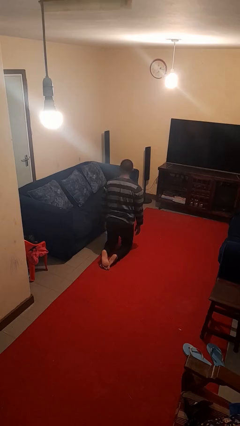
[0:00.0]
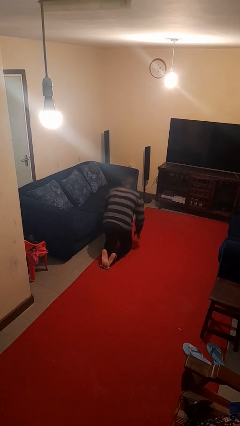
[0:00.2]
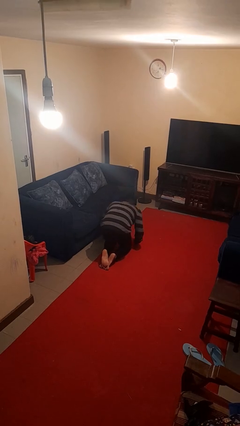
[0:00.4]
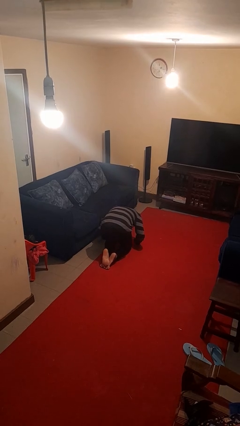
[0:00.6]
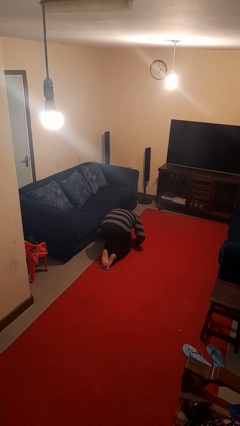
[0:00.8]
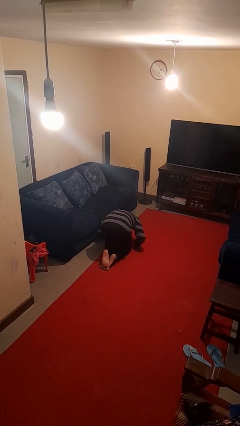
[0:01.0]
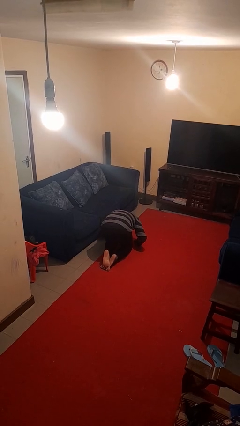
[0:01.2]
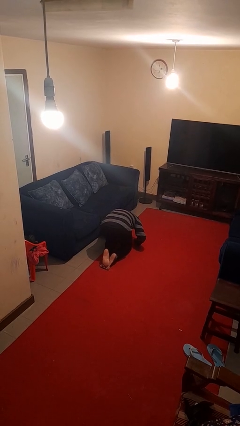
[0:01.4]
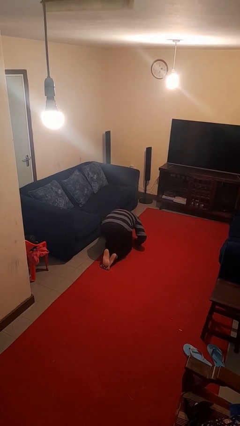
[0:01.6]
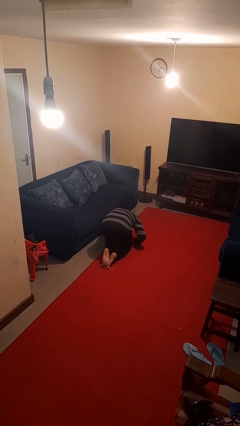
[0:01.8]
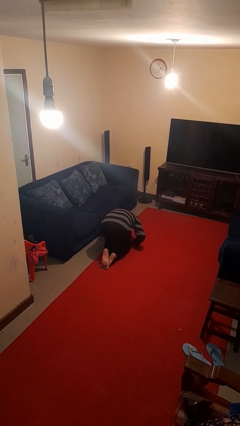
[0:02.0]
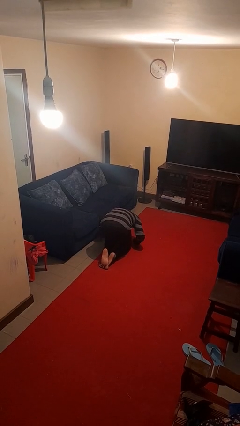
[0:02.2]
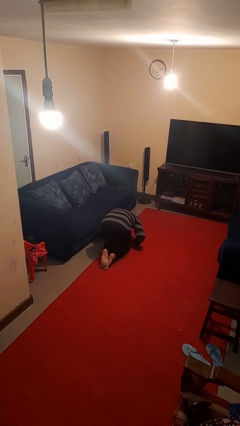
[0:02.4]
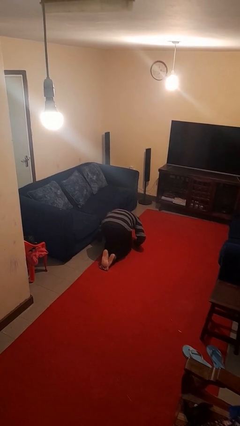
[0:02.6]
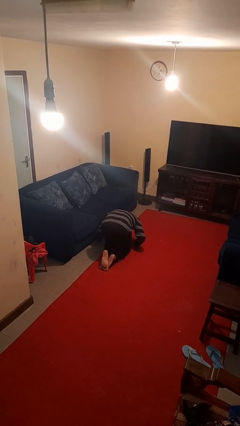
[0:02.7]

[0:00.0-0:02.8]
person searches under couch

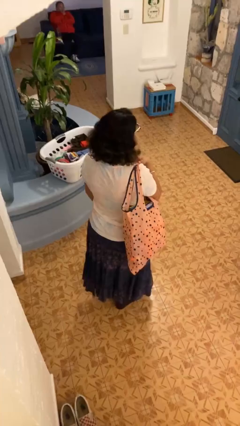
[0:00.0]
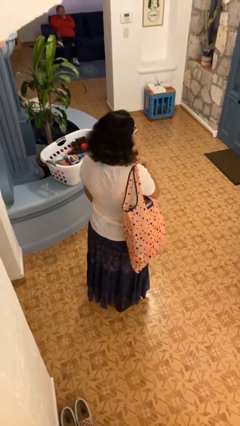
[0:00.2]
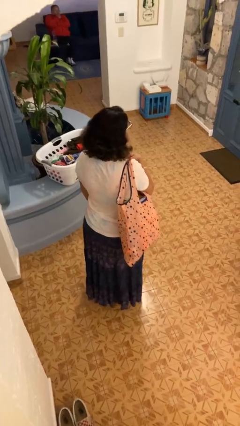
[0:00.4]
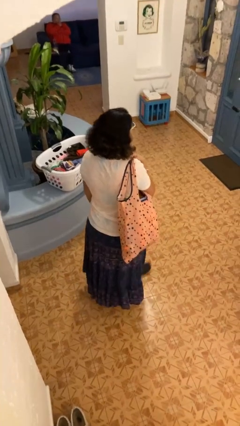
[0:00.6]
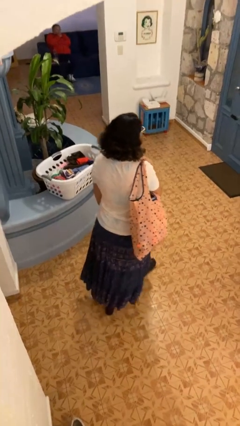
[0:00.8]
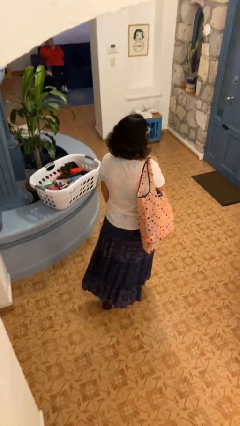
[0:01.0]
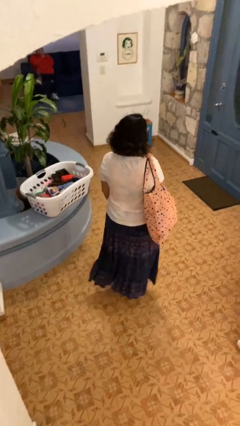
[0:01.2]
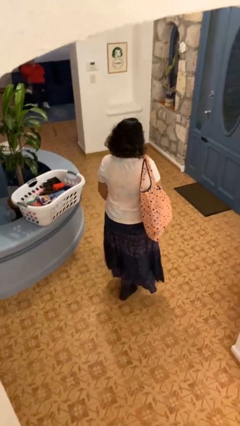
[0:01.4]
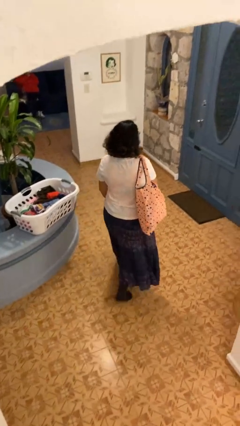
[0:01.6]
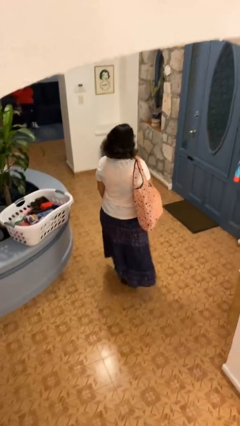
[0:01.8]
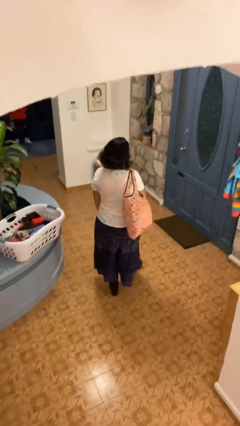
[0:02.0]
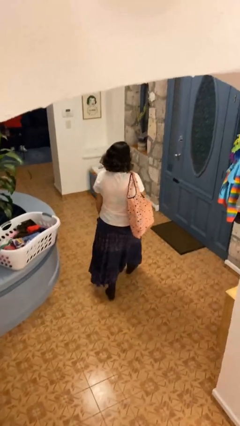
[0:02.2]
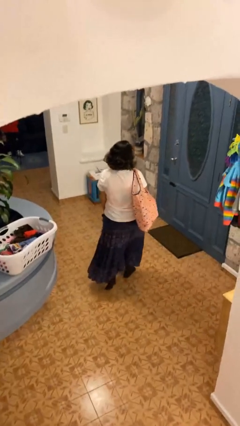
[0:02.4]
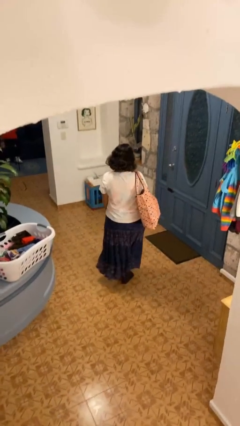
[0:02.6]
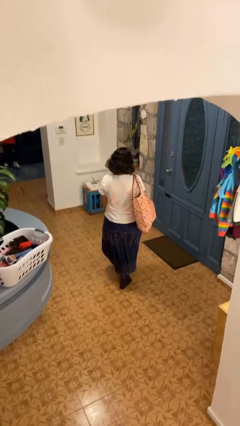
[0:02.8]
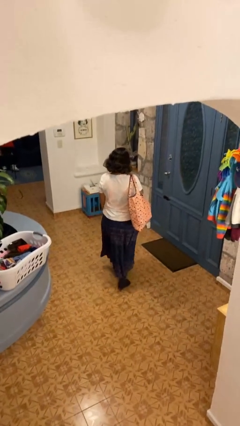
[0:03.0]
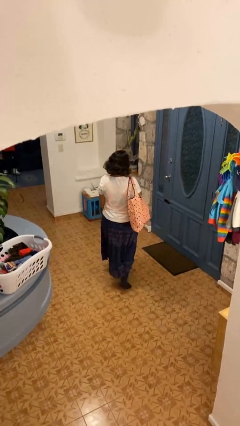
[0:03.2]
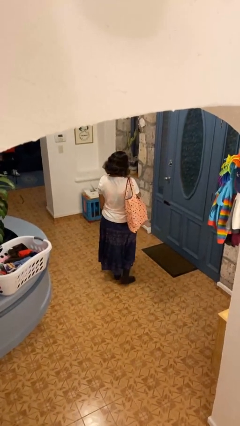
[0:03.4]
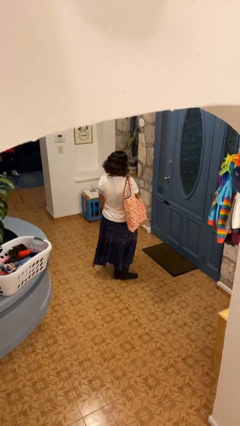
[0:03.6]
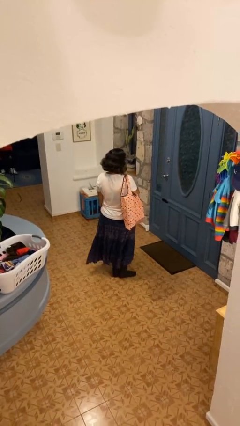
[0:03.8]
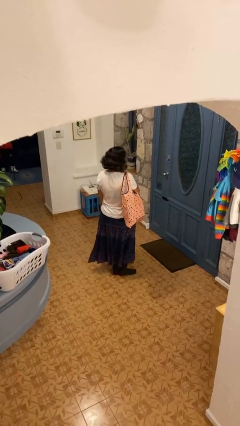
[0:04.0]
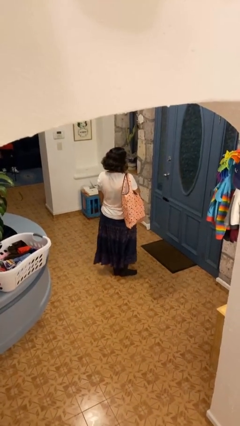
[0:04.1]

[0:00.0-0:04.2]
person carries groceries

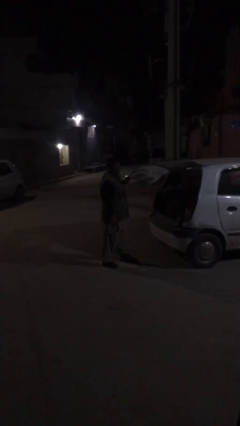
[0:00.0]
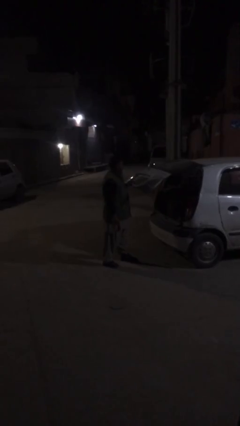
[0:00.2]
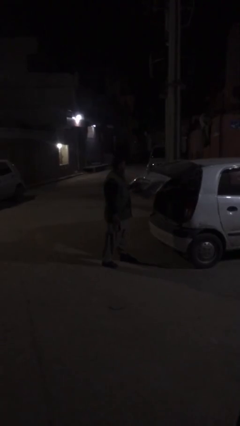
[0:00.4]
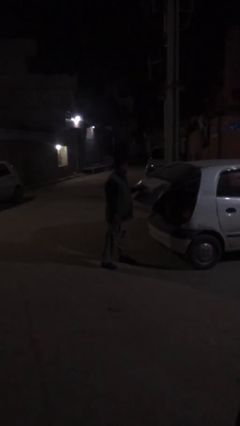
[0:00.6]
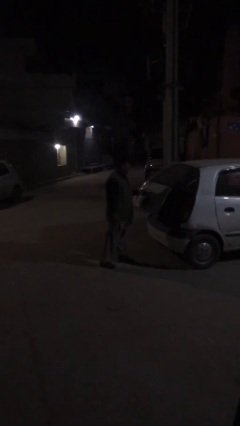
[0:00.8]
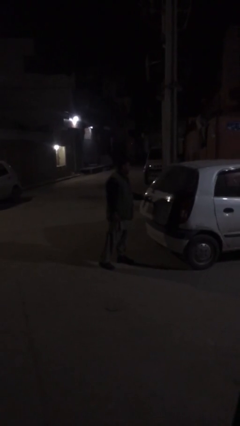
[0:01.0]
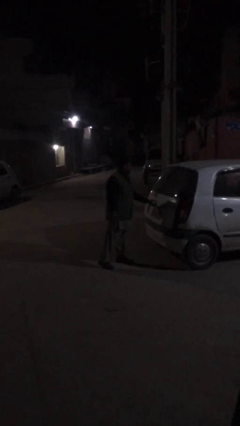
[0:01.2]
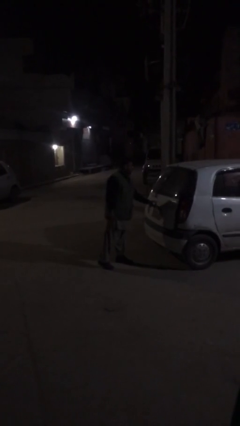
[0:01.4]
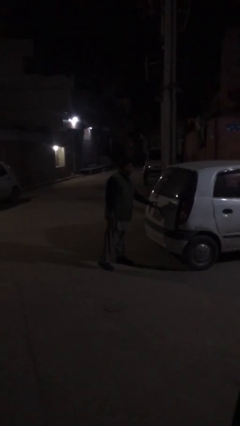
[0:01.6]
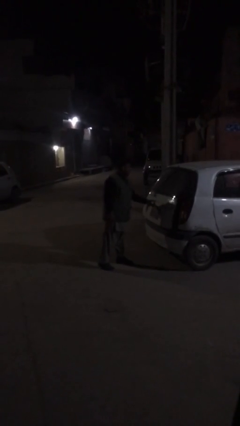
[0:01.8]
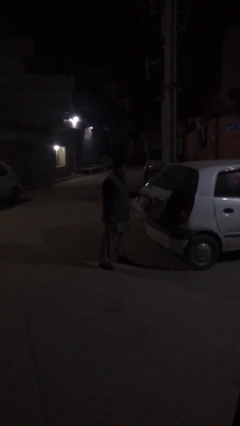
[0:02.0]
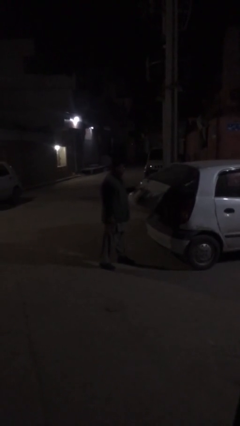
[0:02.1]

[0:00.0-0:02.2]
person closes car trunk

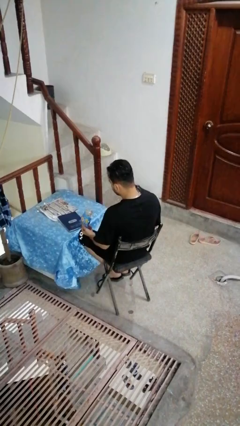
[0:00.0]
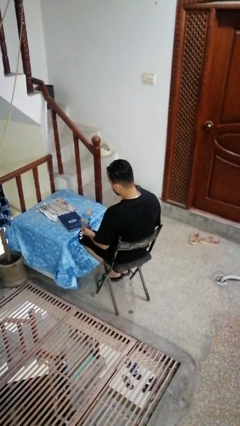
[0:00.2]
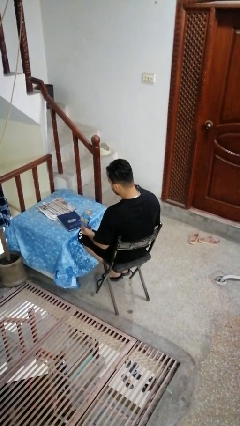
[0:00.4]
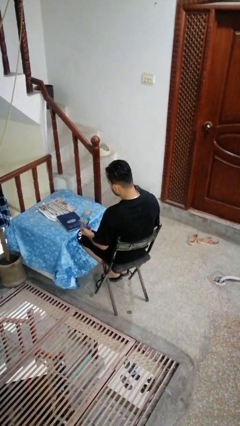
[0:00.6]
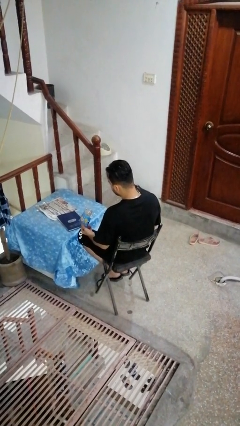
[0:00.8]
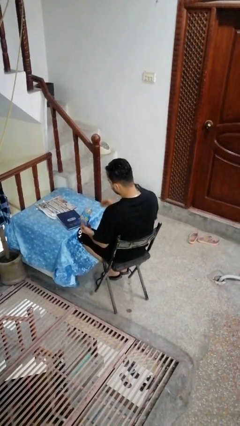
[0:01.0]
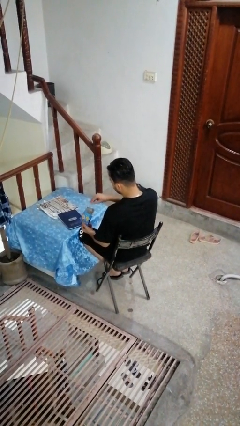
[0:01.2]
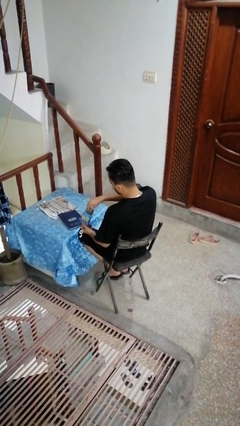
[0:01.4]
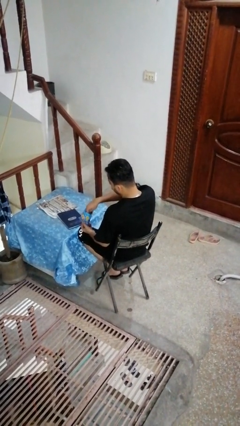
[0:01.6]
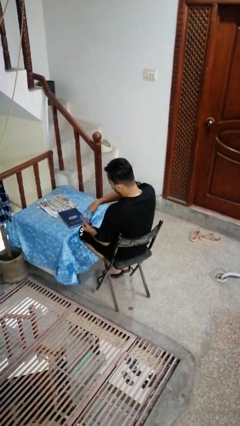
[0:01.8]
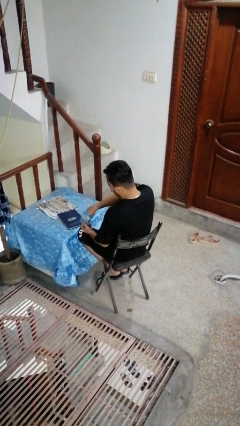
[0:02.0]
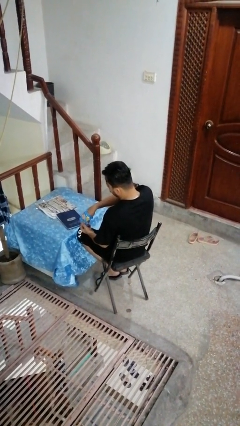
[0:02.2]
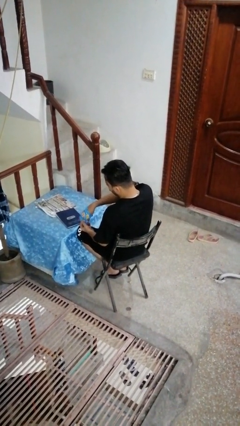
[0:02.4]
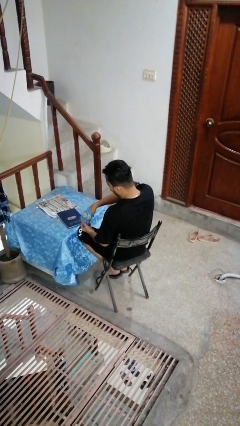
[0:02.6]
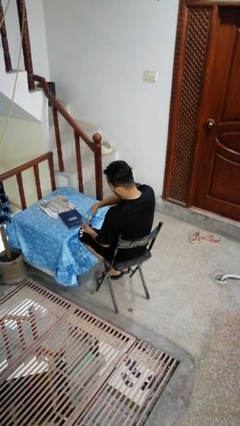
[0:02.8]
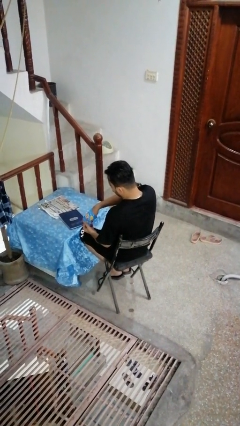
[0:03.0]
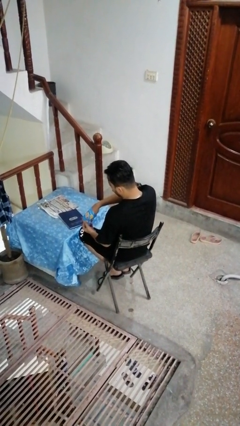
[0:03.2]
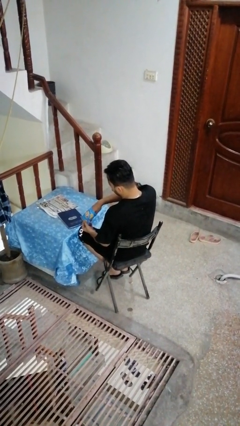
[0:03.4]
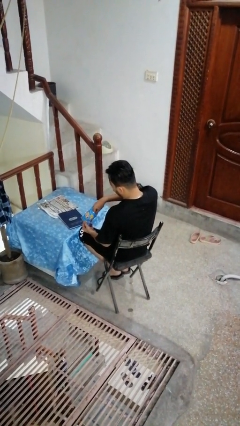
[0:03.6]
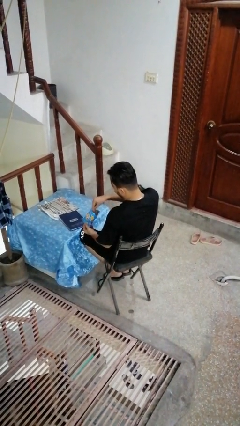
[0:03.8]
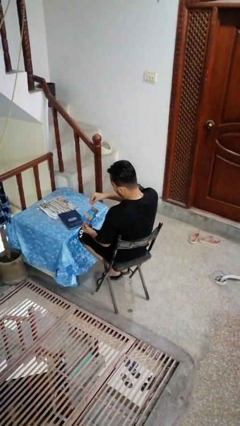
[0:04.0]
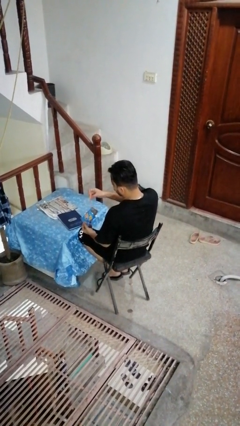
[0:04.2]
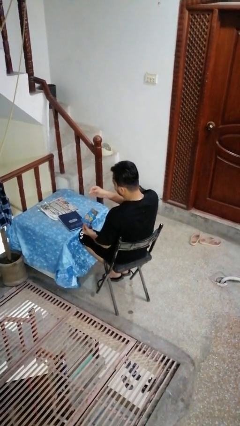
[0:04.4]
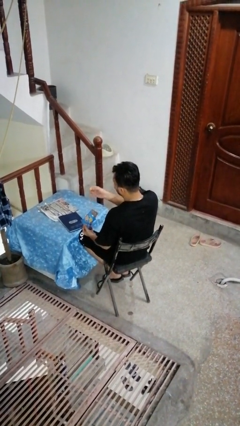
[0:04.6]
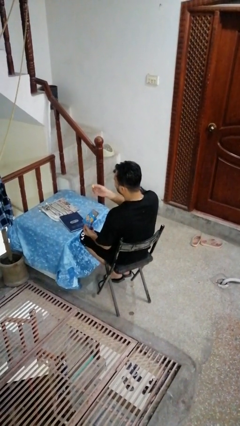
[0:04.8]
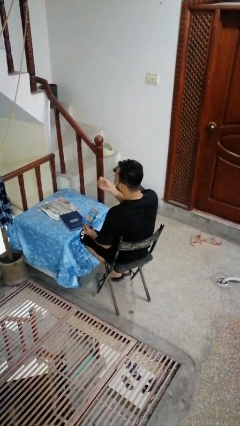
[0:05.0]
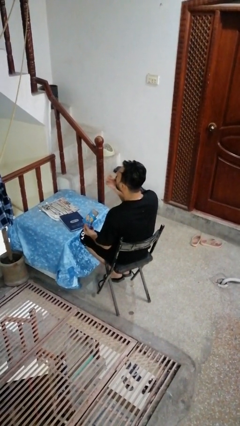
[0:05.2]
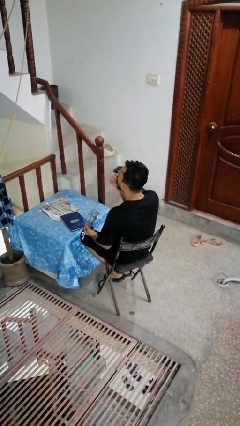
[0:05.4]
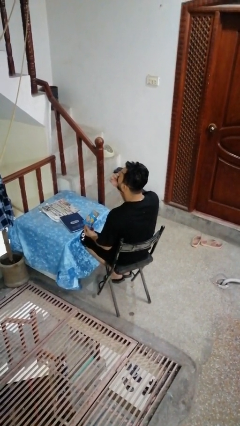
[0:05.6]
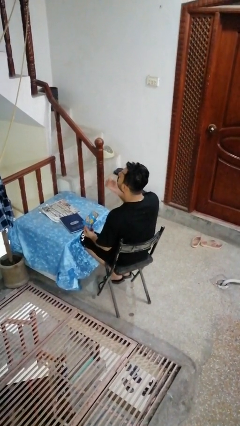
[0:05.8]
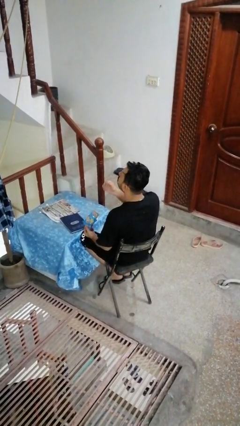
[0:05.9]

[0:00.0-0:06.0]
person eats snack from bag

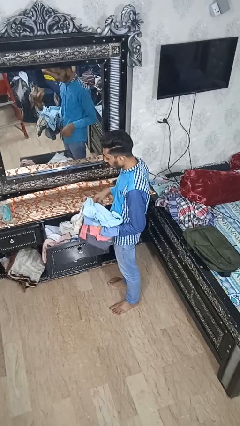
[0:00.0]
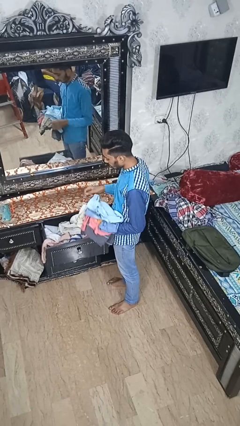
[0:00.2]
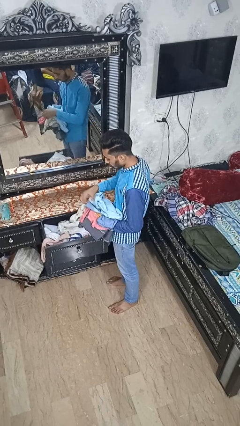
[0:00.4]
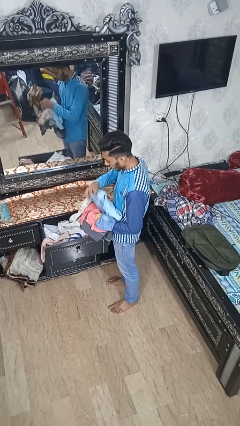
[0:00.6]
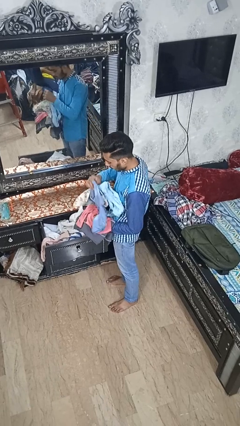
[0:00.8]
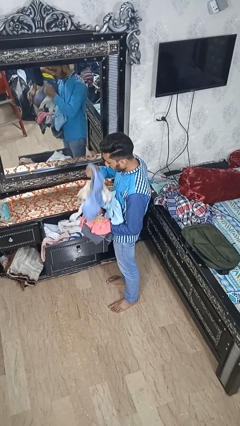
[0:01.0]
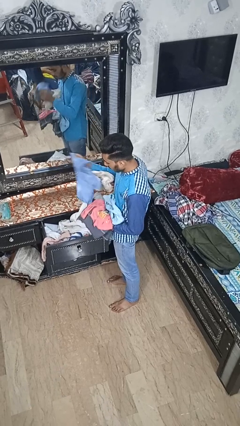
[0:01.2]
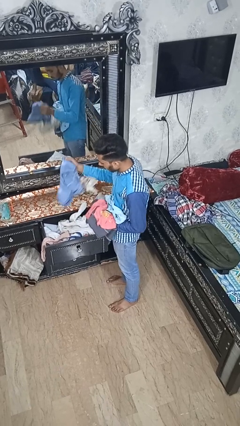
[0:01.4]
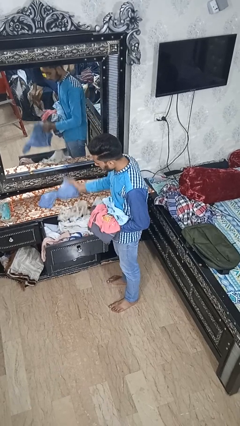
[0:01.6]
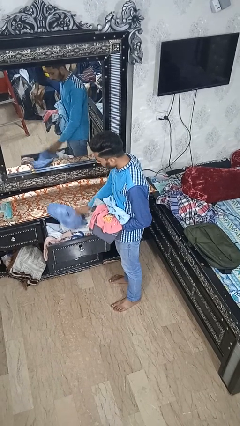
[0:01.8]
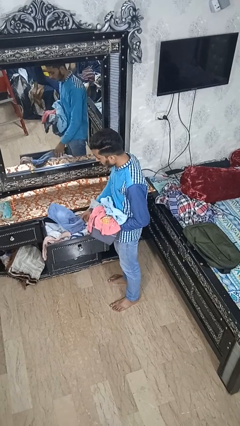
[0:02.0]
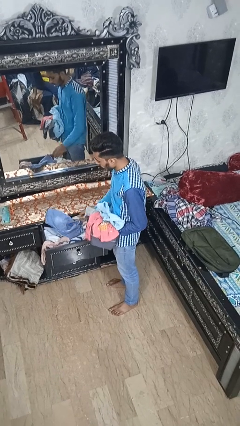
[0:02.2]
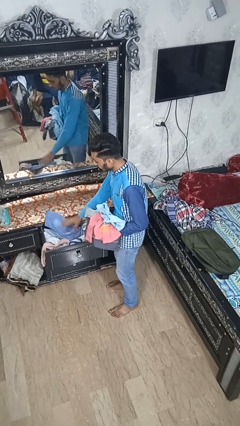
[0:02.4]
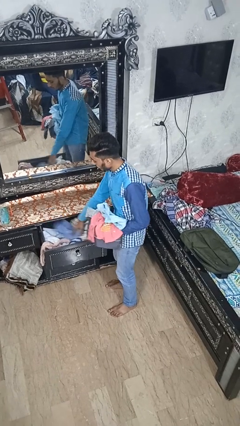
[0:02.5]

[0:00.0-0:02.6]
person puts clothes into dresser
